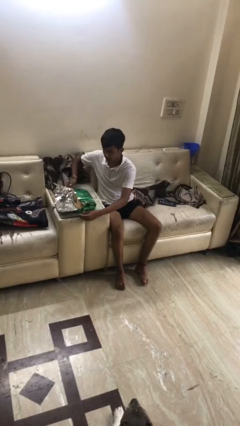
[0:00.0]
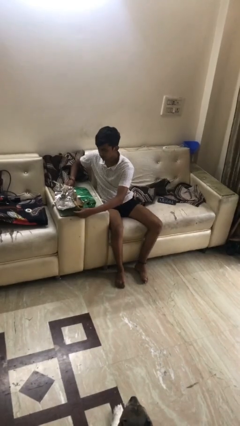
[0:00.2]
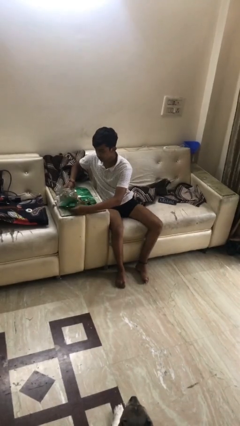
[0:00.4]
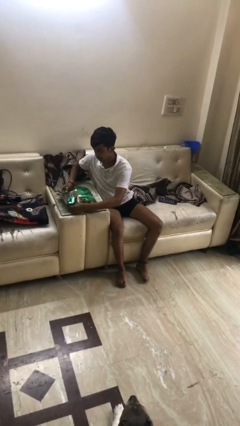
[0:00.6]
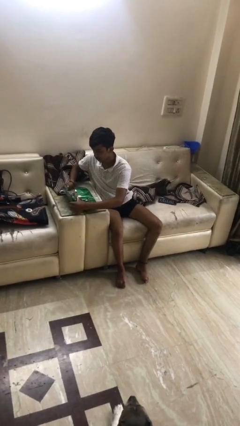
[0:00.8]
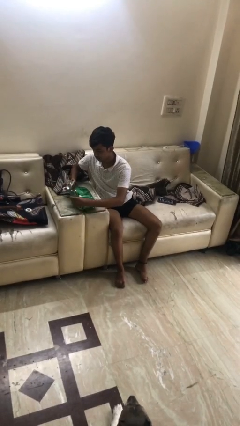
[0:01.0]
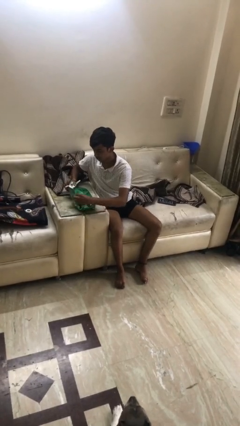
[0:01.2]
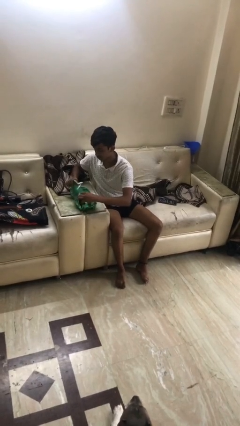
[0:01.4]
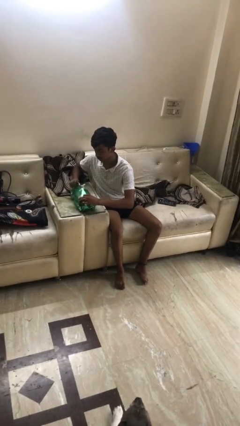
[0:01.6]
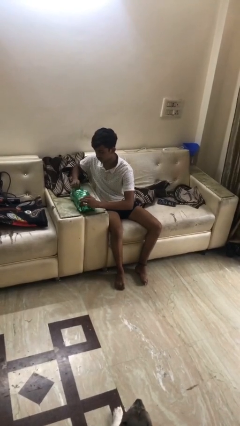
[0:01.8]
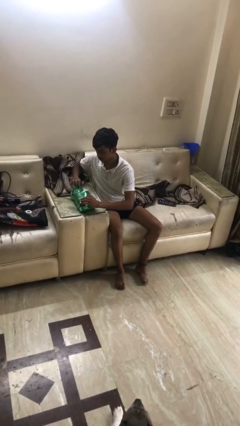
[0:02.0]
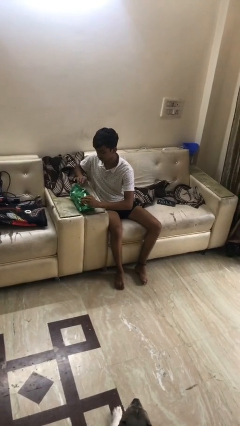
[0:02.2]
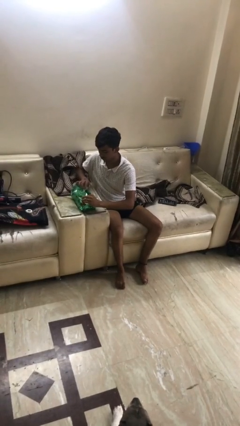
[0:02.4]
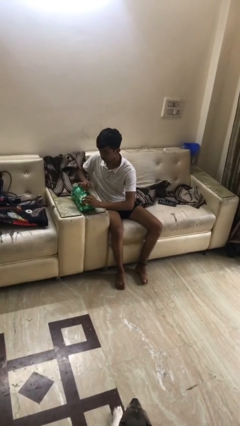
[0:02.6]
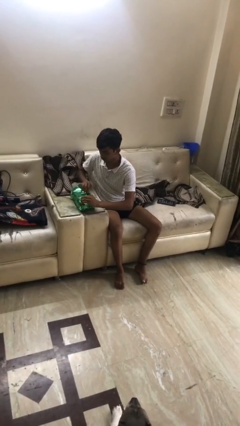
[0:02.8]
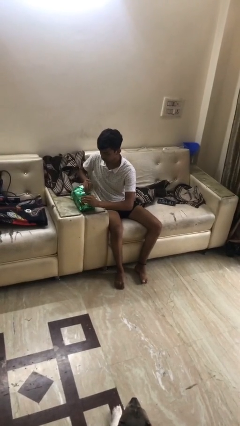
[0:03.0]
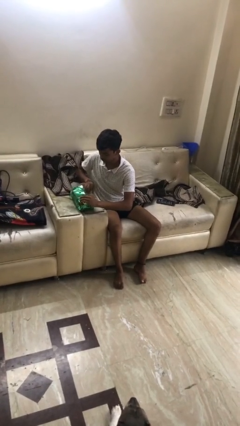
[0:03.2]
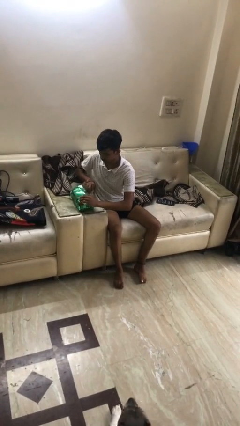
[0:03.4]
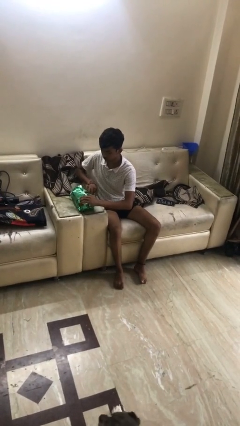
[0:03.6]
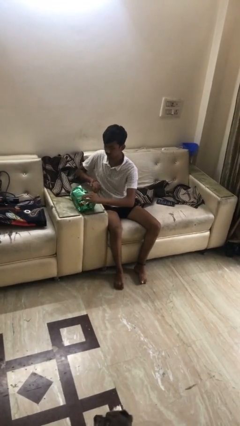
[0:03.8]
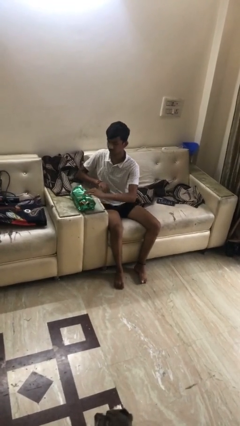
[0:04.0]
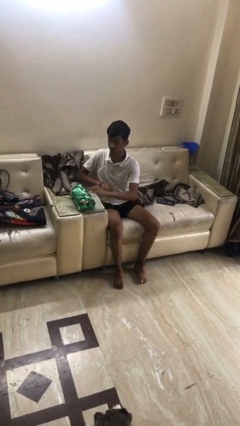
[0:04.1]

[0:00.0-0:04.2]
person wraps box

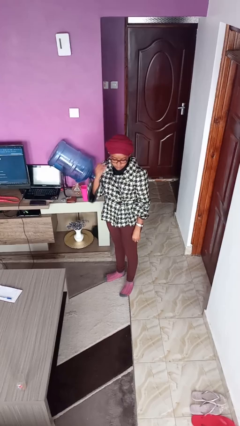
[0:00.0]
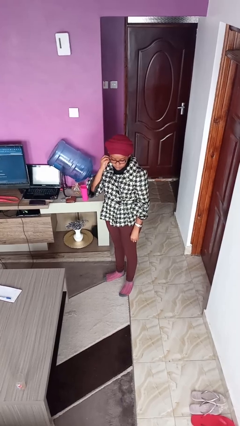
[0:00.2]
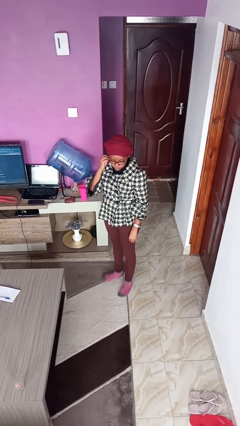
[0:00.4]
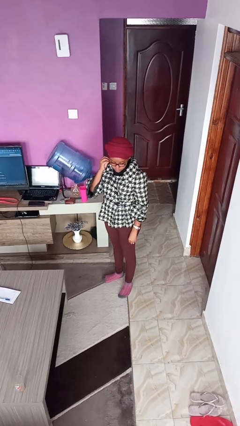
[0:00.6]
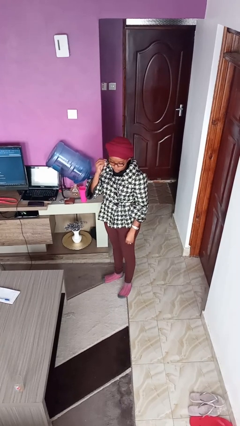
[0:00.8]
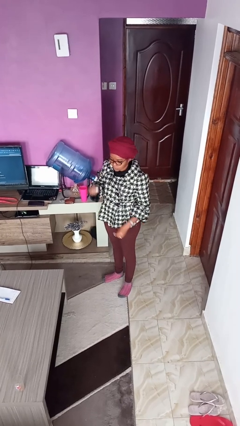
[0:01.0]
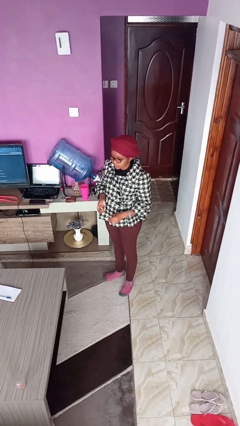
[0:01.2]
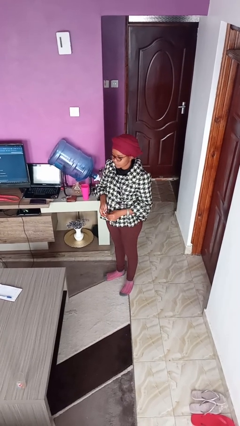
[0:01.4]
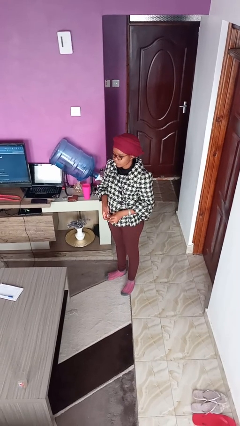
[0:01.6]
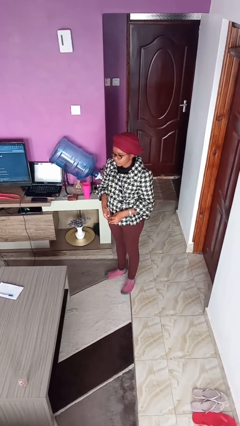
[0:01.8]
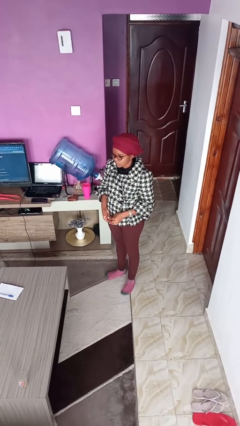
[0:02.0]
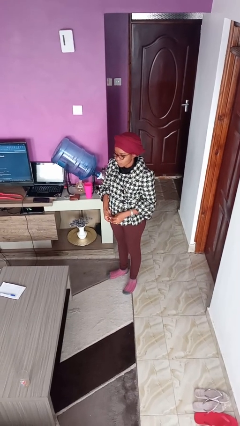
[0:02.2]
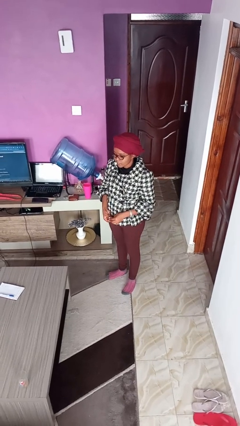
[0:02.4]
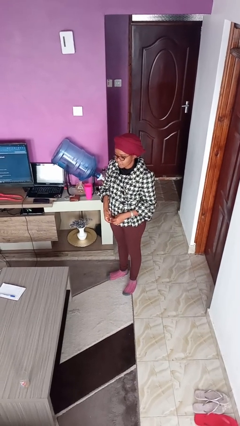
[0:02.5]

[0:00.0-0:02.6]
person takes off earrings

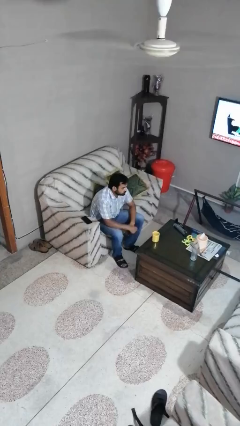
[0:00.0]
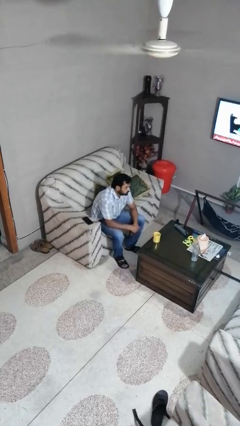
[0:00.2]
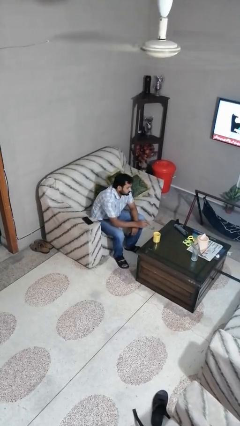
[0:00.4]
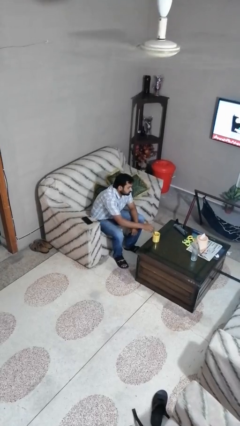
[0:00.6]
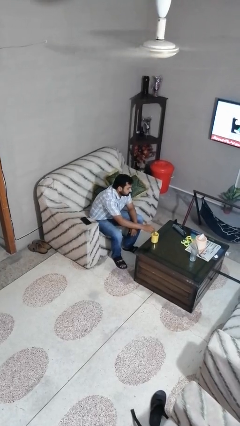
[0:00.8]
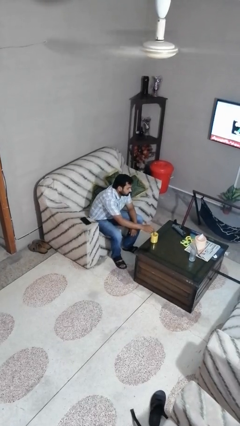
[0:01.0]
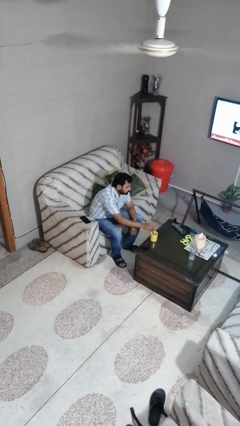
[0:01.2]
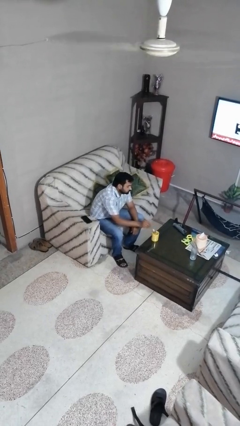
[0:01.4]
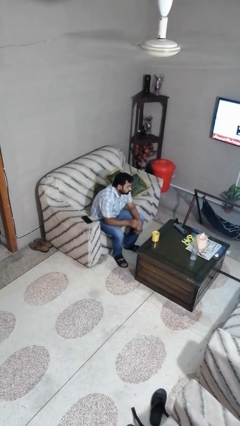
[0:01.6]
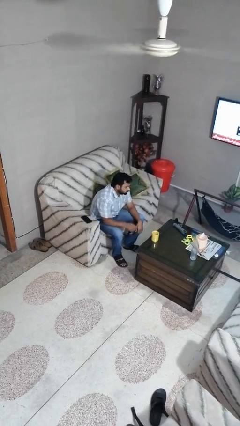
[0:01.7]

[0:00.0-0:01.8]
person stirs mug

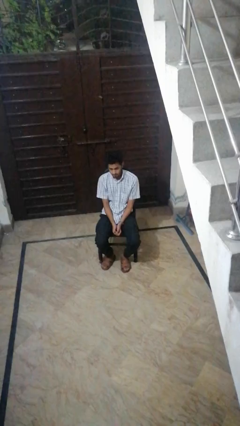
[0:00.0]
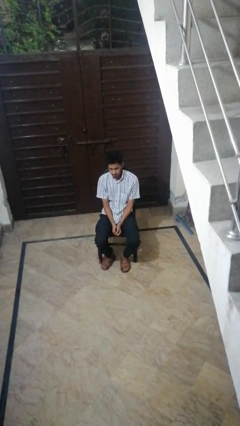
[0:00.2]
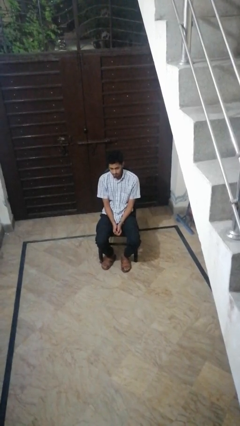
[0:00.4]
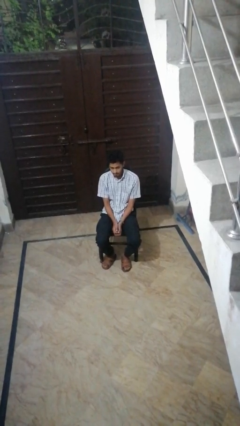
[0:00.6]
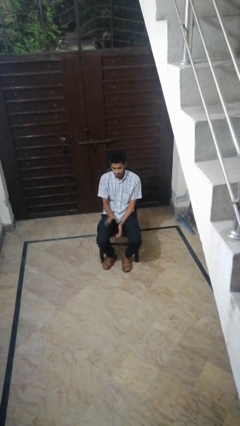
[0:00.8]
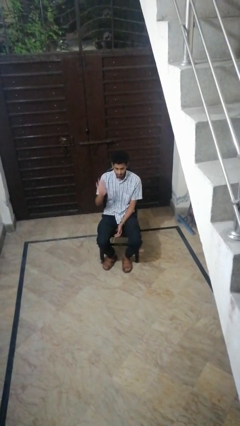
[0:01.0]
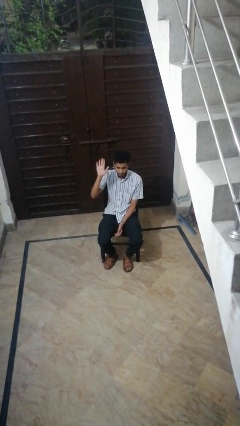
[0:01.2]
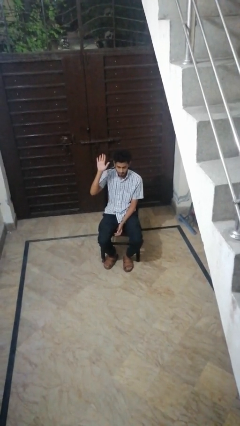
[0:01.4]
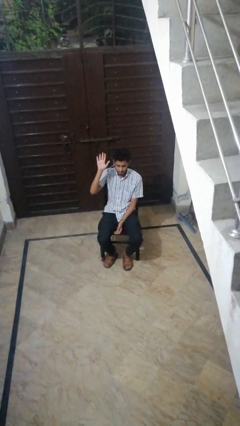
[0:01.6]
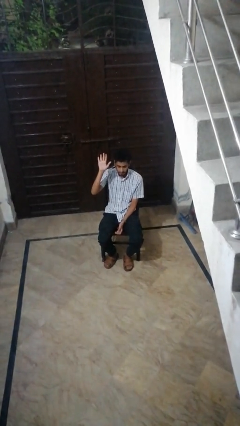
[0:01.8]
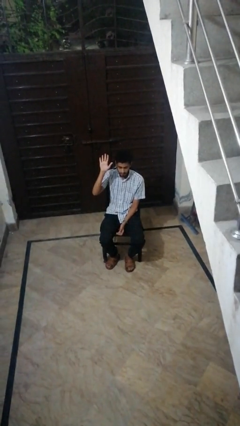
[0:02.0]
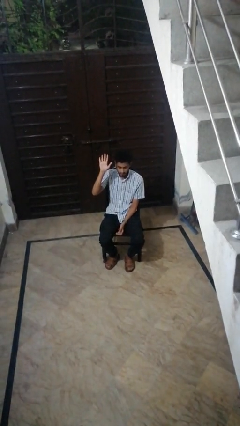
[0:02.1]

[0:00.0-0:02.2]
person gestures raise hand

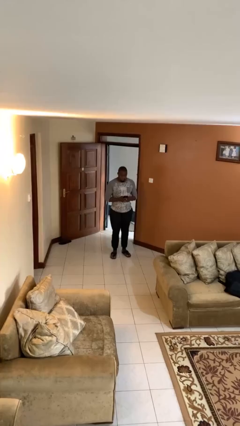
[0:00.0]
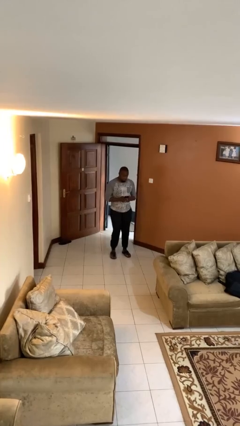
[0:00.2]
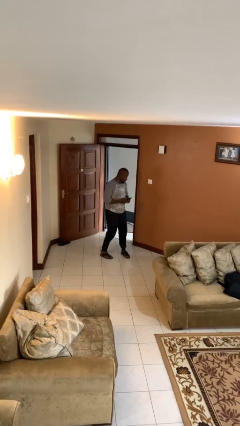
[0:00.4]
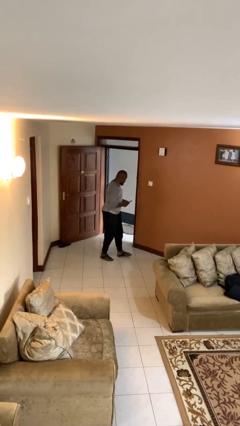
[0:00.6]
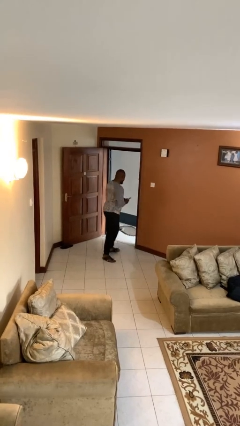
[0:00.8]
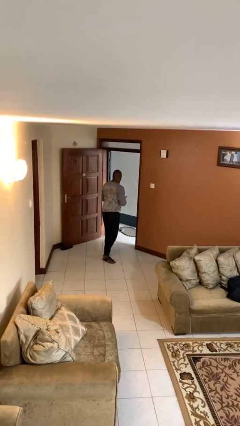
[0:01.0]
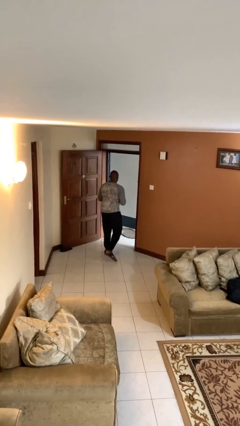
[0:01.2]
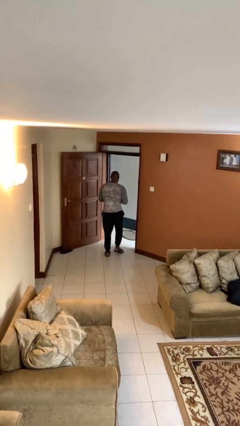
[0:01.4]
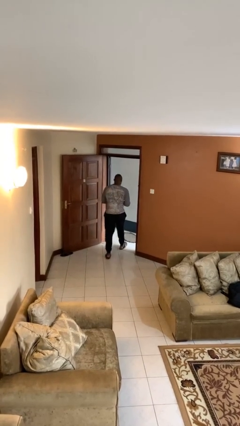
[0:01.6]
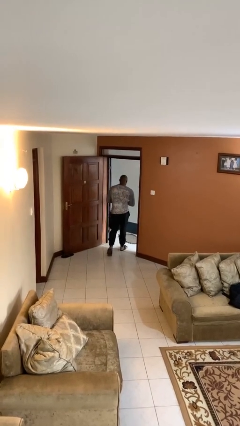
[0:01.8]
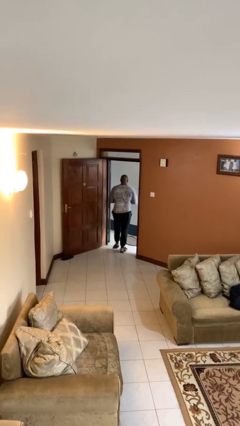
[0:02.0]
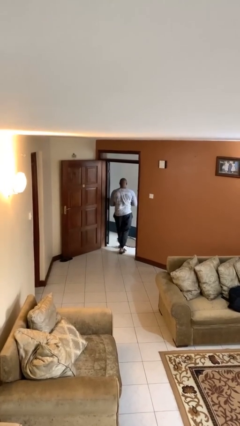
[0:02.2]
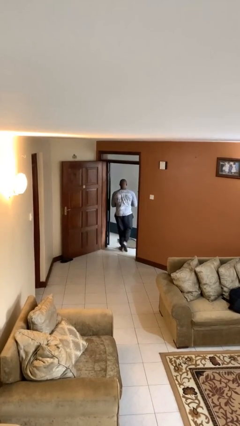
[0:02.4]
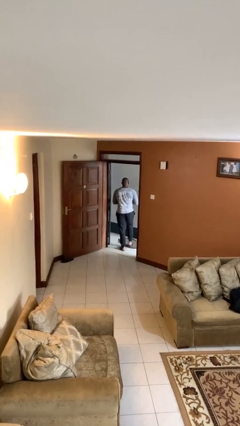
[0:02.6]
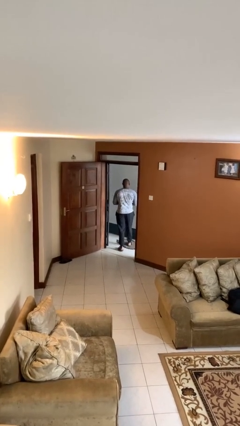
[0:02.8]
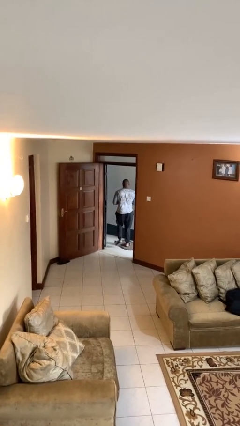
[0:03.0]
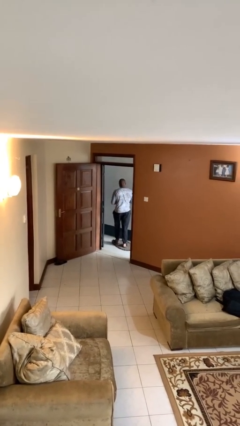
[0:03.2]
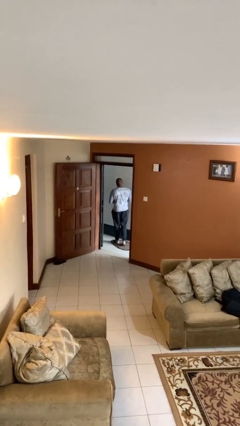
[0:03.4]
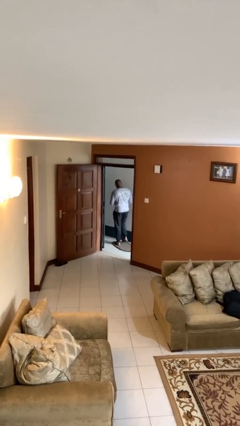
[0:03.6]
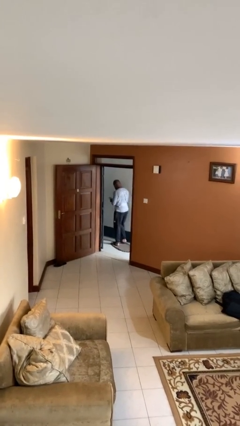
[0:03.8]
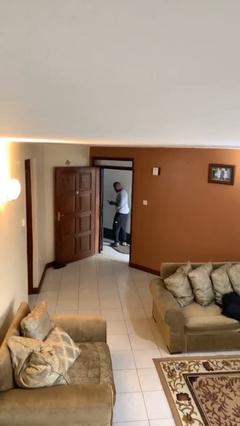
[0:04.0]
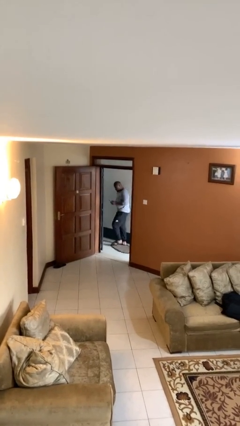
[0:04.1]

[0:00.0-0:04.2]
person exits scene through structure

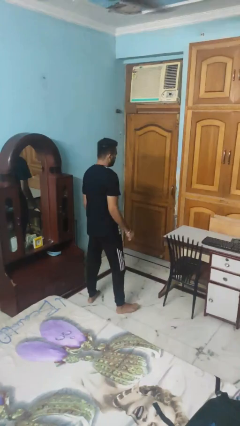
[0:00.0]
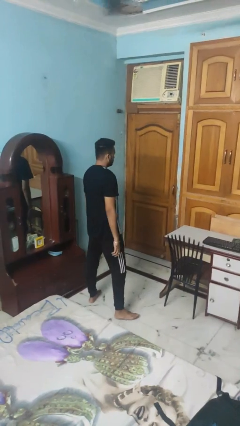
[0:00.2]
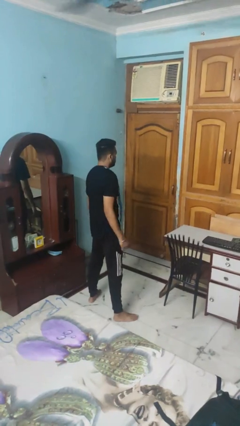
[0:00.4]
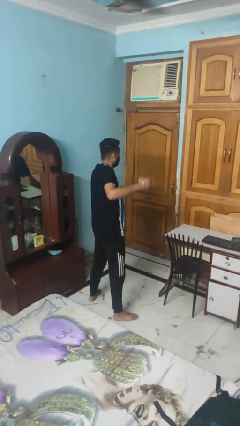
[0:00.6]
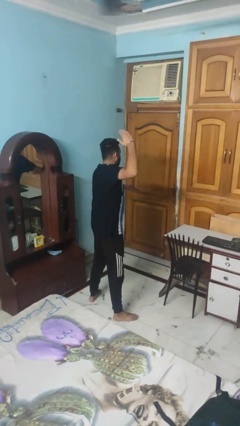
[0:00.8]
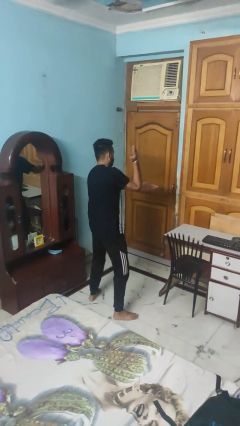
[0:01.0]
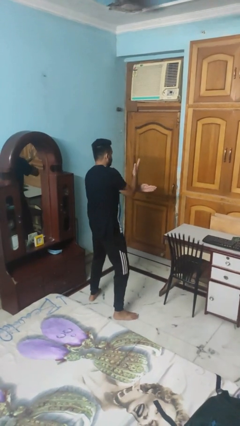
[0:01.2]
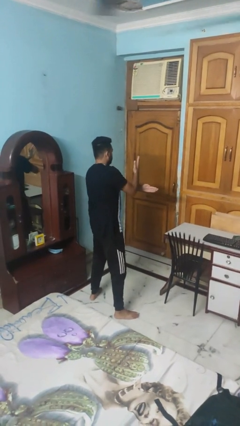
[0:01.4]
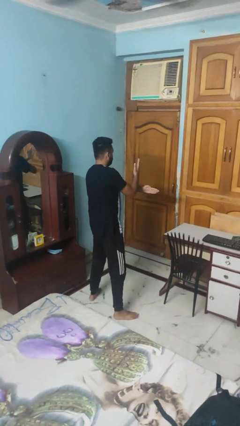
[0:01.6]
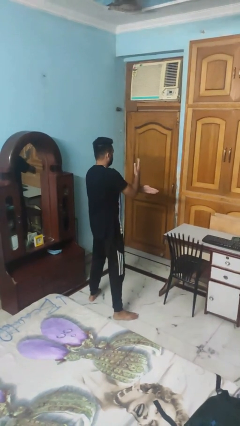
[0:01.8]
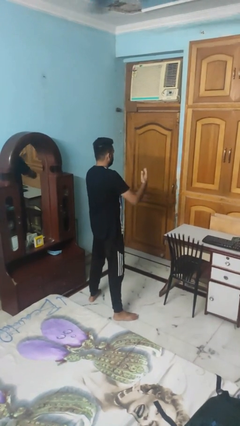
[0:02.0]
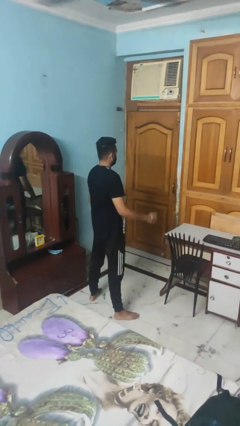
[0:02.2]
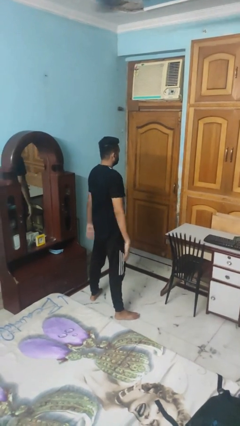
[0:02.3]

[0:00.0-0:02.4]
person karate chop
